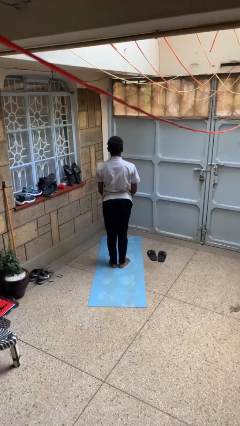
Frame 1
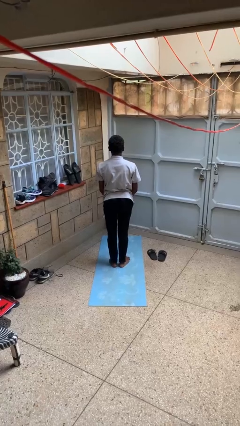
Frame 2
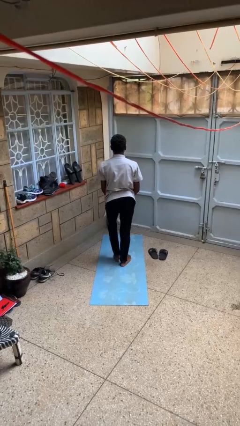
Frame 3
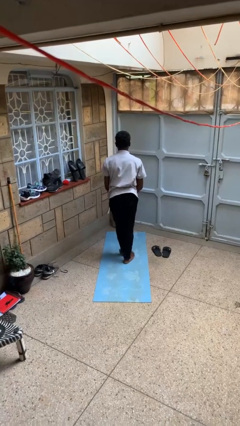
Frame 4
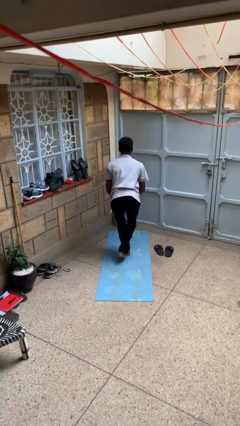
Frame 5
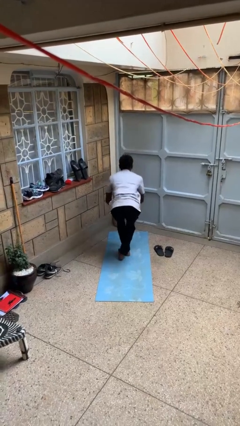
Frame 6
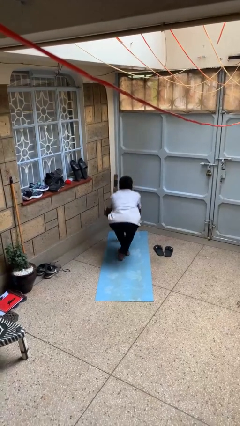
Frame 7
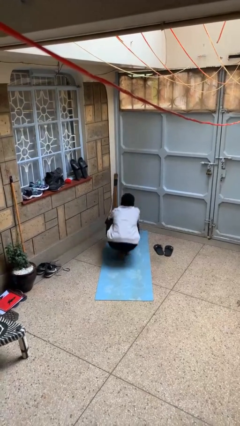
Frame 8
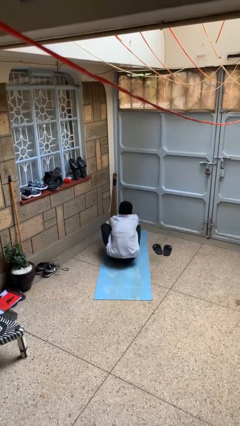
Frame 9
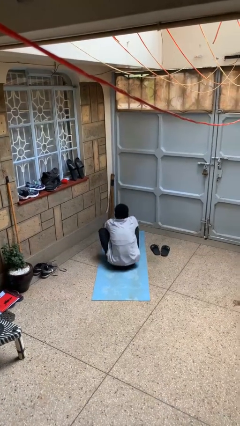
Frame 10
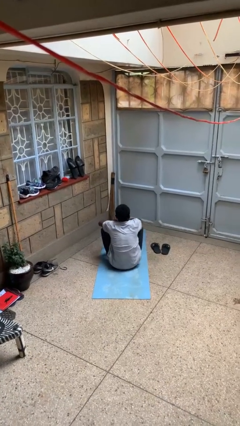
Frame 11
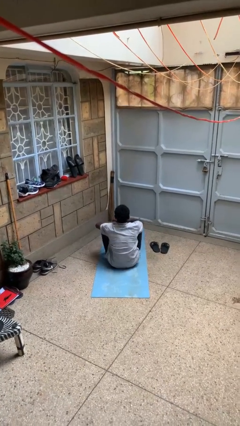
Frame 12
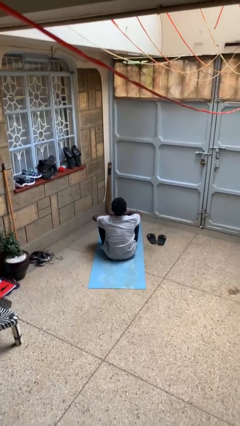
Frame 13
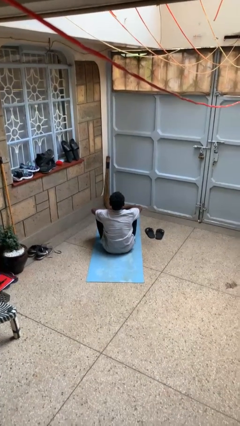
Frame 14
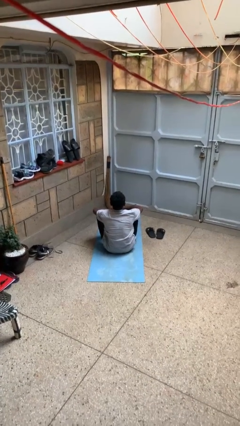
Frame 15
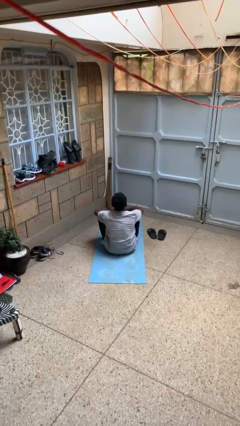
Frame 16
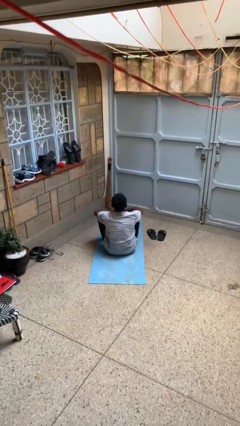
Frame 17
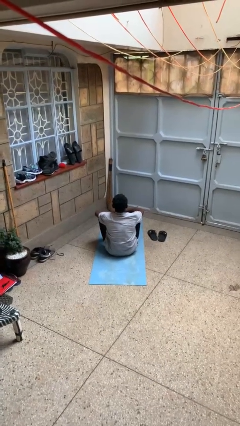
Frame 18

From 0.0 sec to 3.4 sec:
person sits crisscross

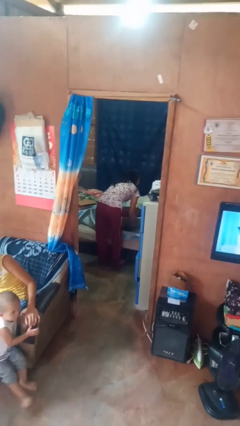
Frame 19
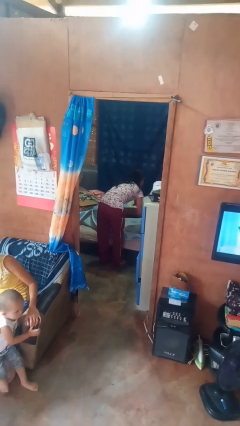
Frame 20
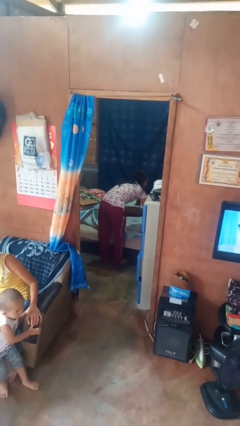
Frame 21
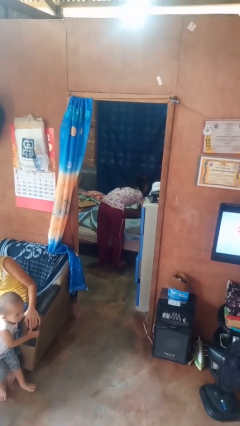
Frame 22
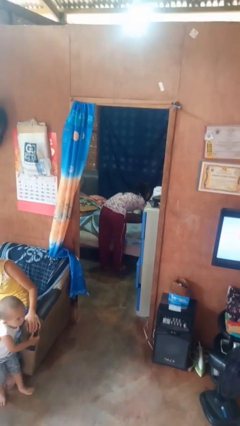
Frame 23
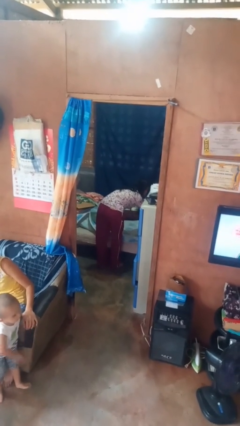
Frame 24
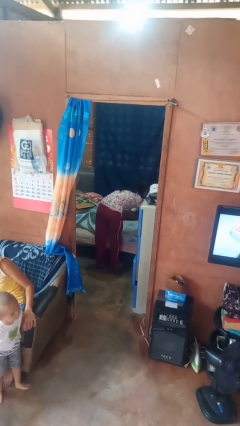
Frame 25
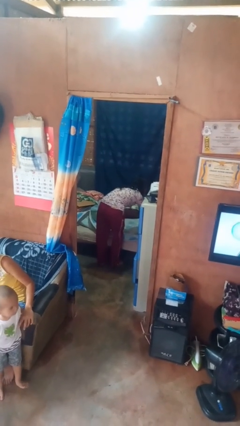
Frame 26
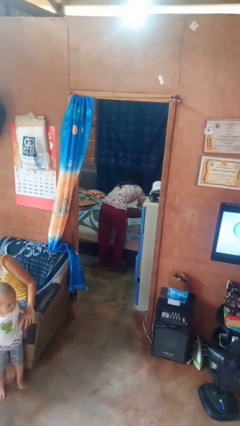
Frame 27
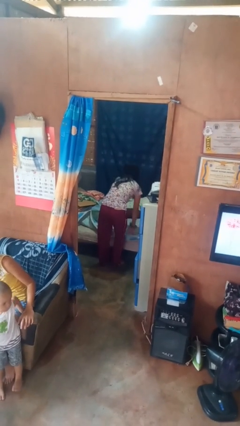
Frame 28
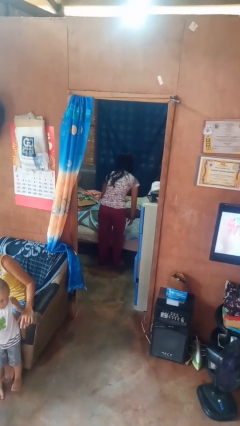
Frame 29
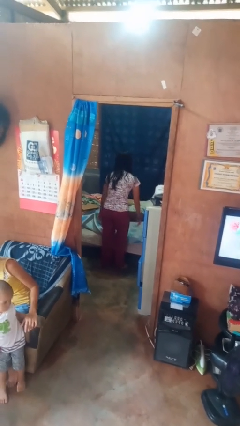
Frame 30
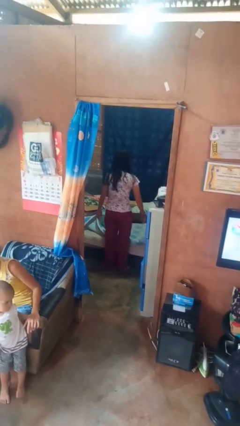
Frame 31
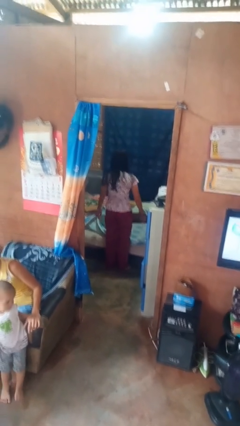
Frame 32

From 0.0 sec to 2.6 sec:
person makes bed

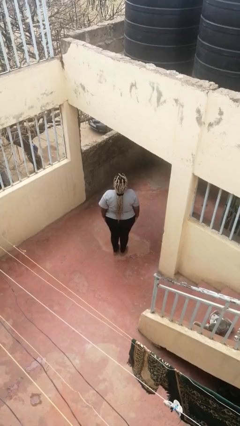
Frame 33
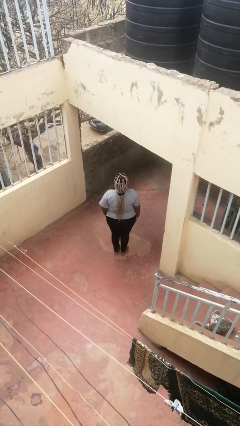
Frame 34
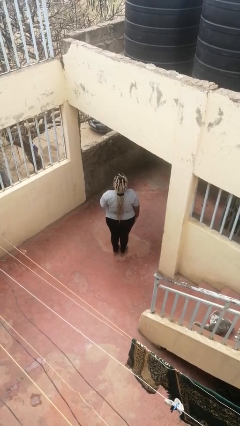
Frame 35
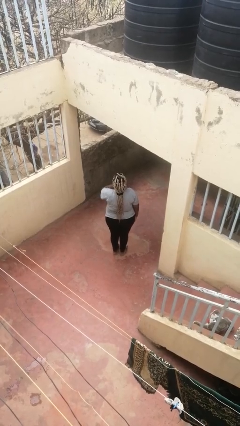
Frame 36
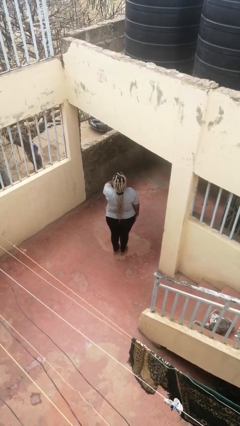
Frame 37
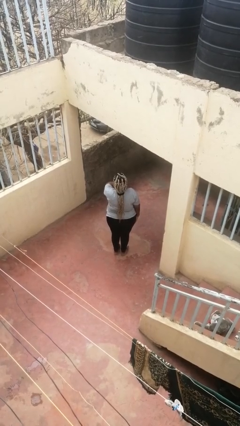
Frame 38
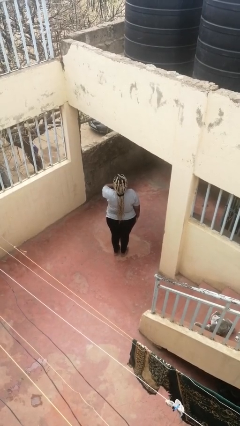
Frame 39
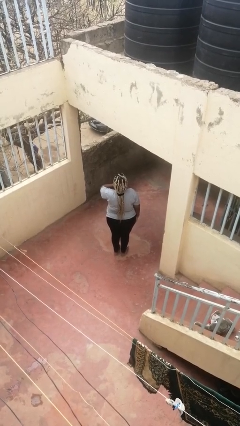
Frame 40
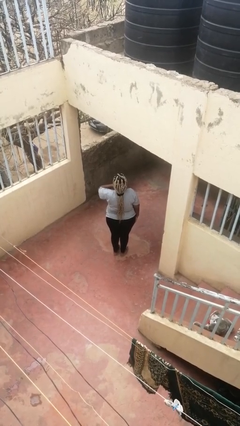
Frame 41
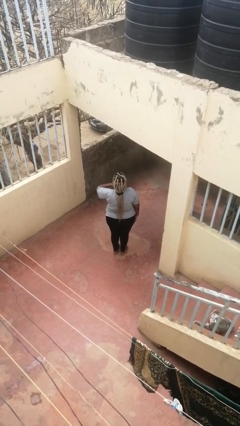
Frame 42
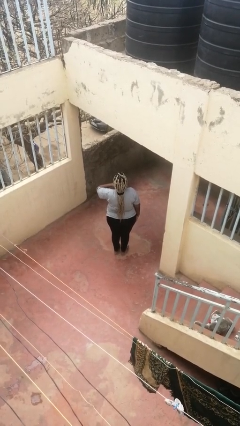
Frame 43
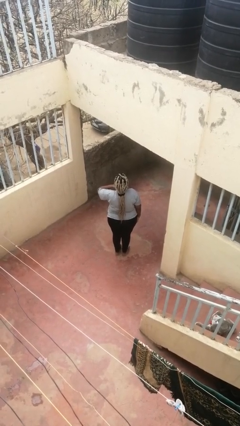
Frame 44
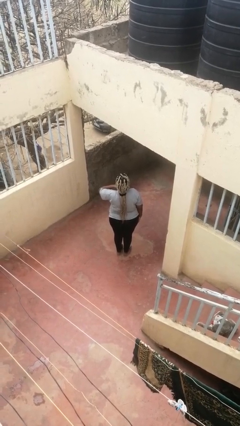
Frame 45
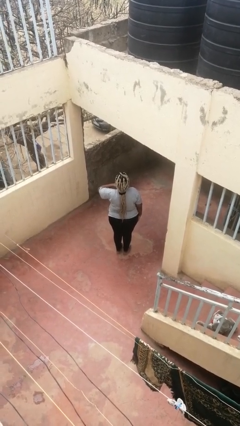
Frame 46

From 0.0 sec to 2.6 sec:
person gestures cut

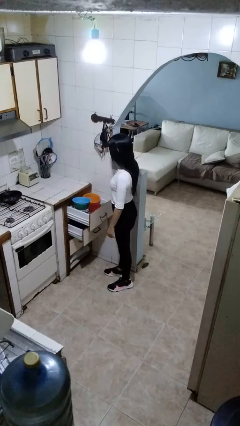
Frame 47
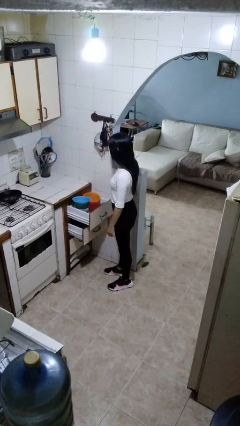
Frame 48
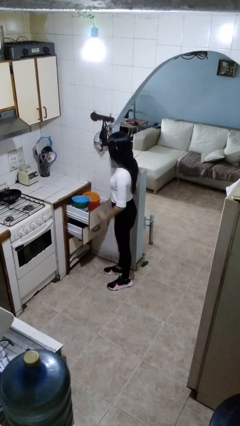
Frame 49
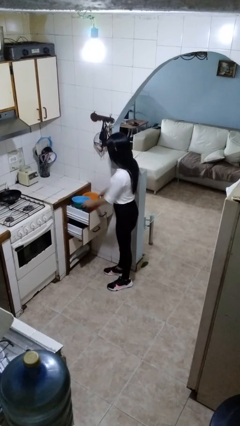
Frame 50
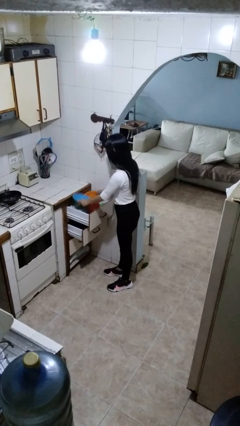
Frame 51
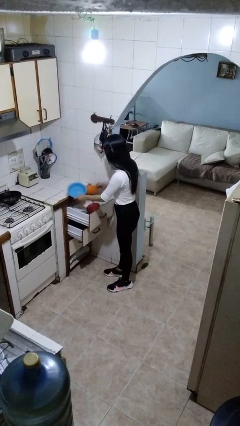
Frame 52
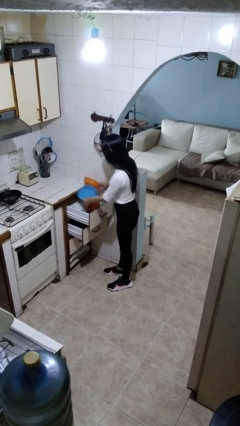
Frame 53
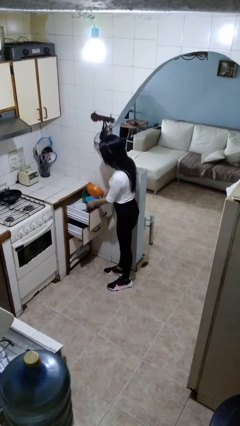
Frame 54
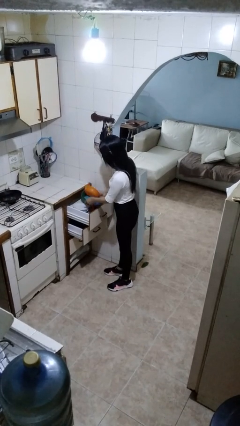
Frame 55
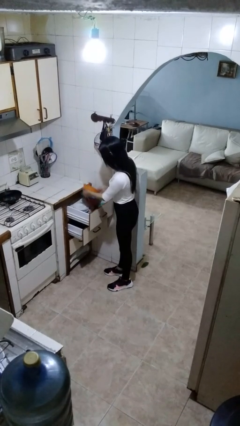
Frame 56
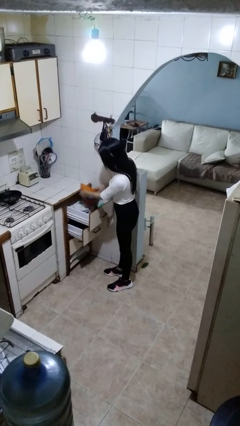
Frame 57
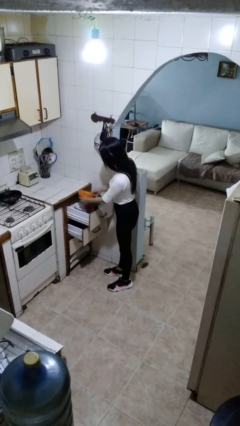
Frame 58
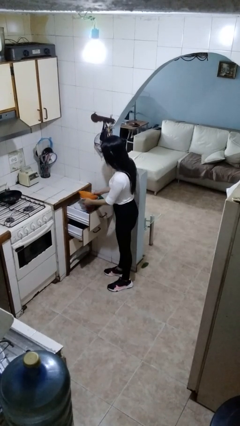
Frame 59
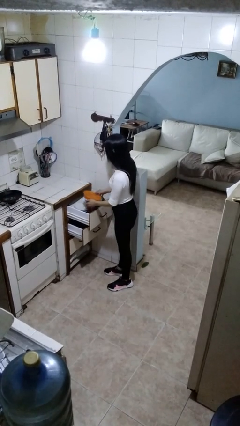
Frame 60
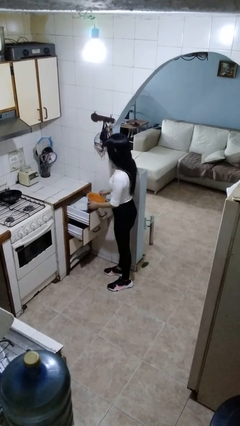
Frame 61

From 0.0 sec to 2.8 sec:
person searches in kitchen drawer

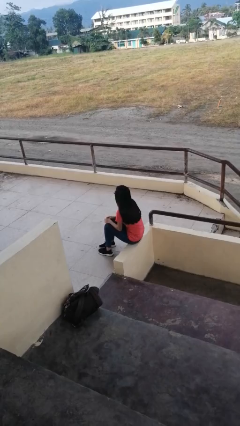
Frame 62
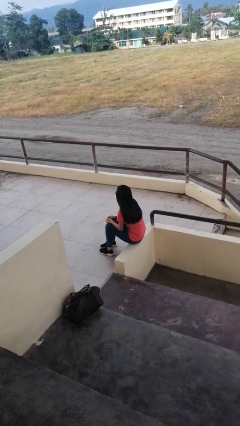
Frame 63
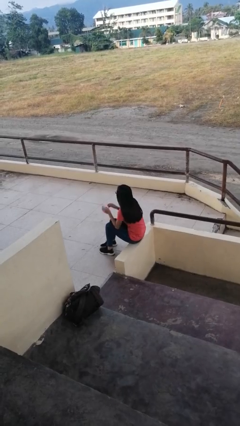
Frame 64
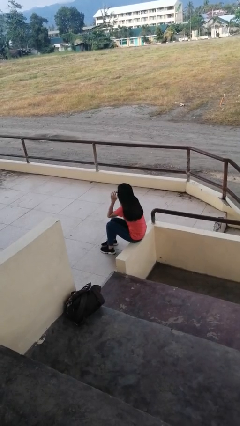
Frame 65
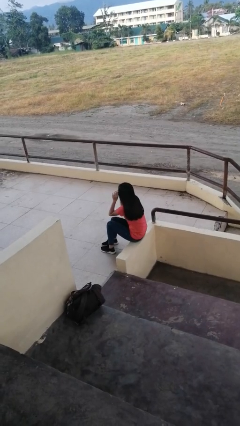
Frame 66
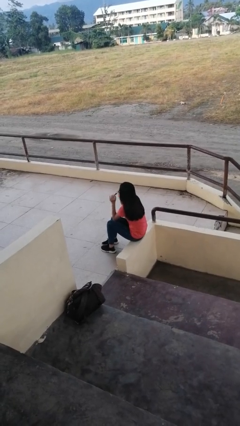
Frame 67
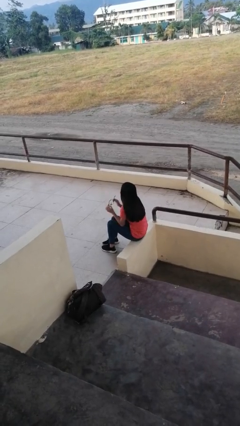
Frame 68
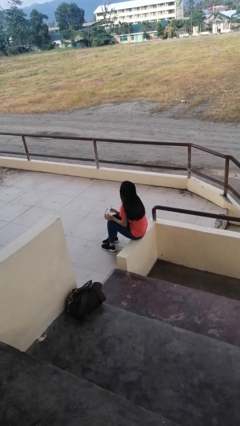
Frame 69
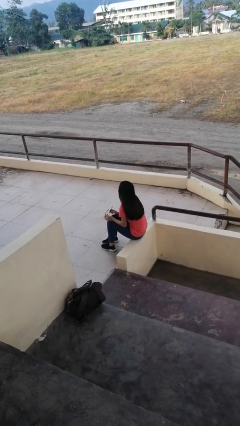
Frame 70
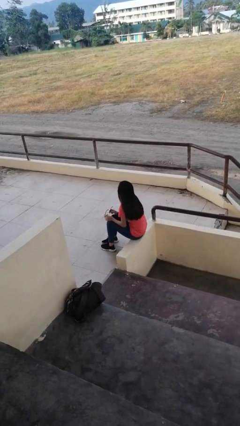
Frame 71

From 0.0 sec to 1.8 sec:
person takes off glasses

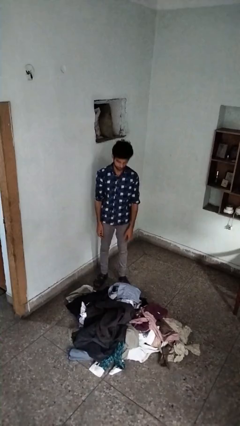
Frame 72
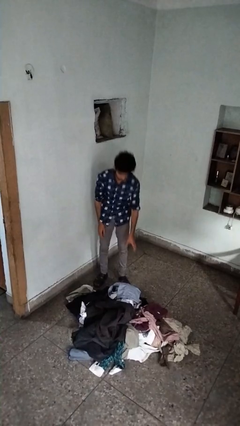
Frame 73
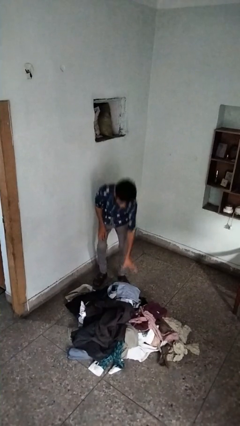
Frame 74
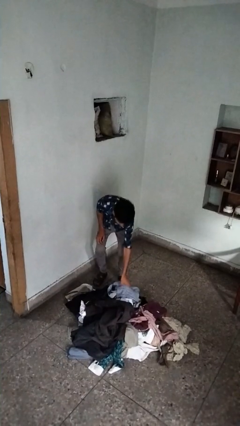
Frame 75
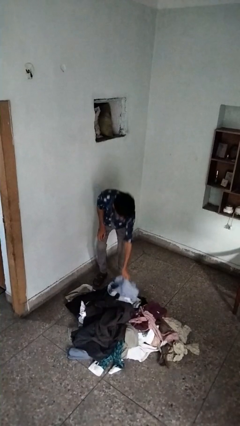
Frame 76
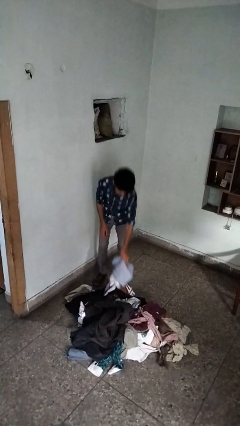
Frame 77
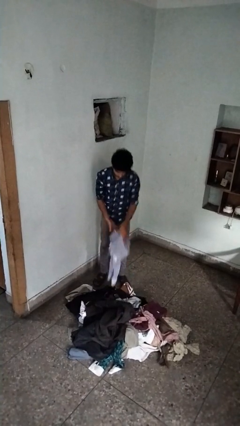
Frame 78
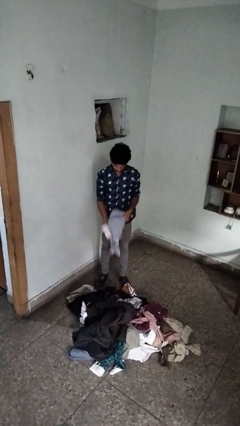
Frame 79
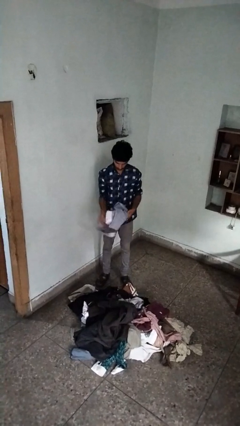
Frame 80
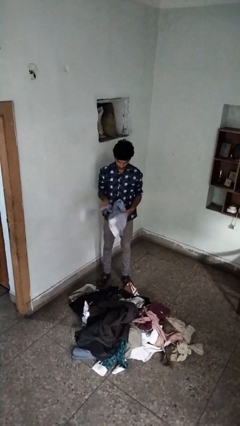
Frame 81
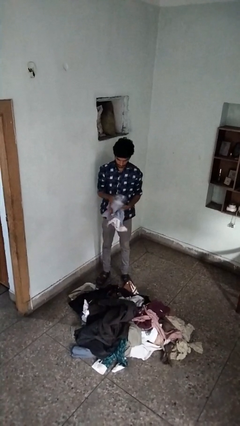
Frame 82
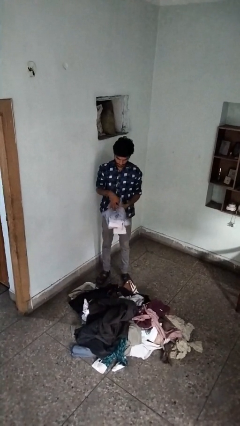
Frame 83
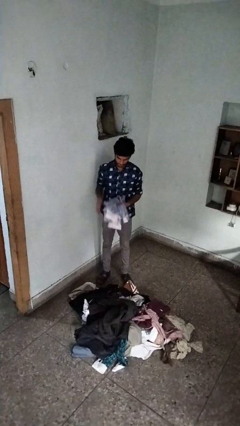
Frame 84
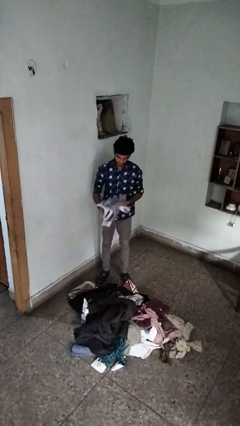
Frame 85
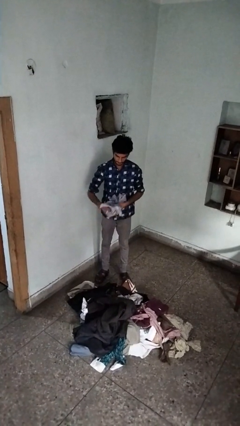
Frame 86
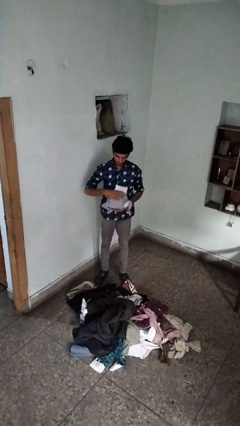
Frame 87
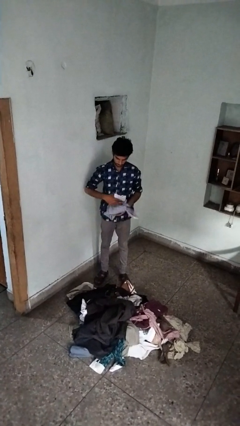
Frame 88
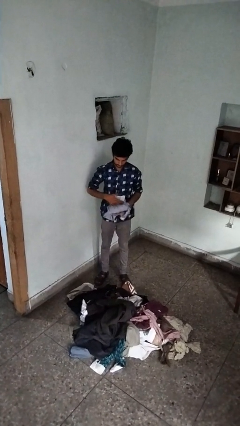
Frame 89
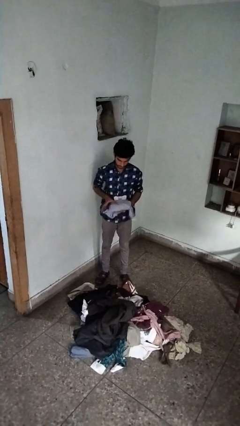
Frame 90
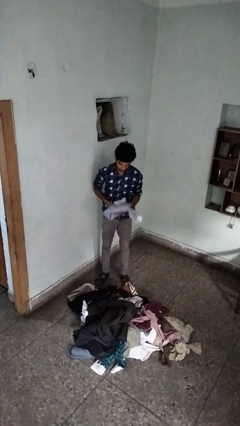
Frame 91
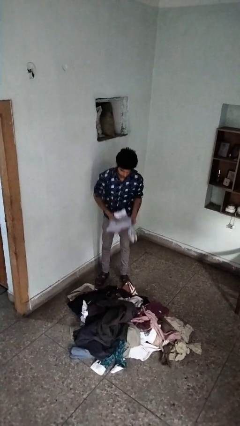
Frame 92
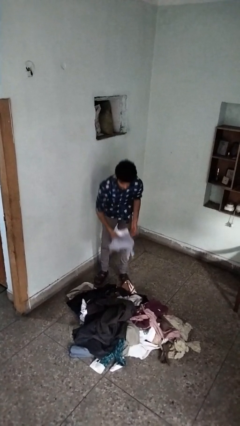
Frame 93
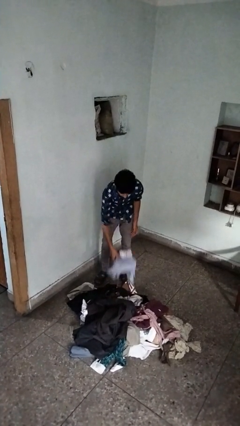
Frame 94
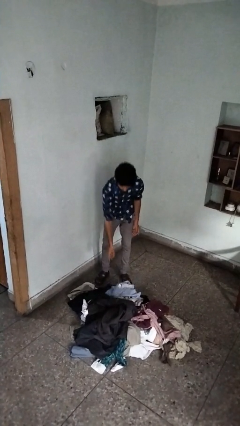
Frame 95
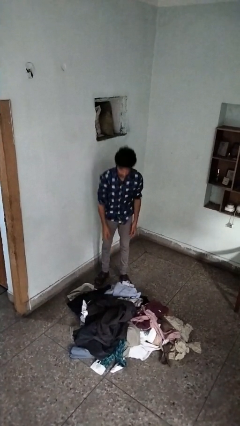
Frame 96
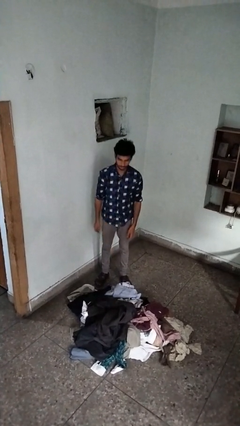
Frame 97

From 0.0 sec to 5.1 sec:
person folds shirt
